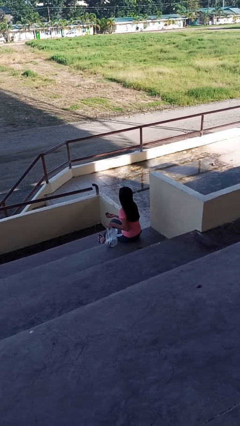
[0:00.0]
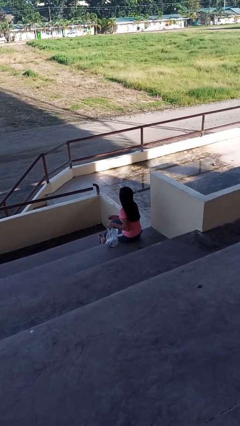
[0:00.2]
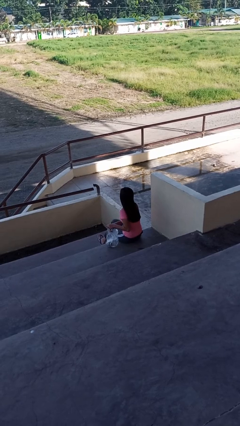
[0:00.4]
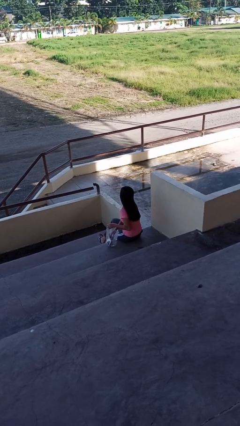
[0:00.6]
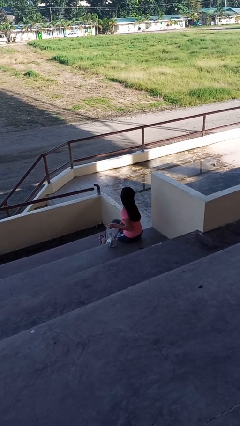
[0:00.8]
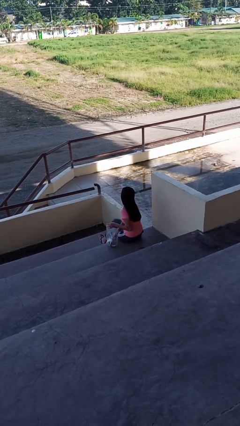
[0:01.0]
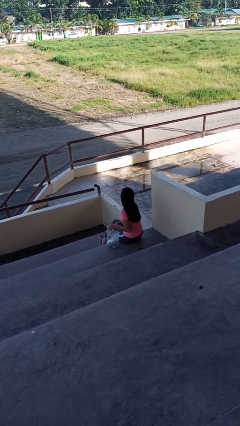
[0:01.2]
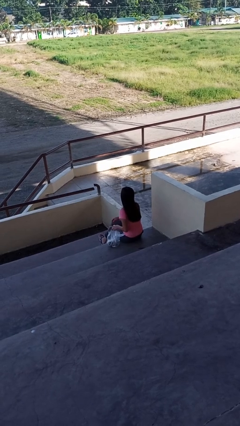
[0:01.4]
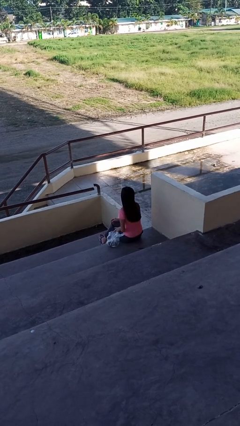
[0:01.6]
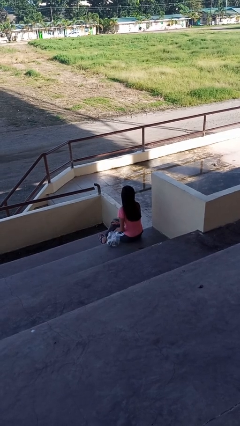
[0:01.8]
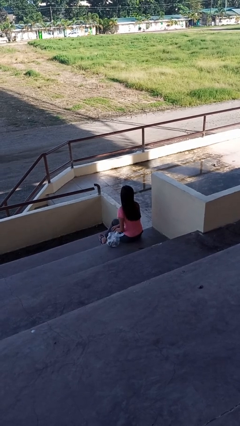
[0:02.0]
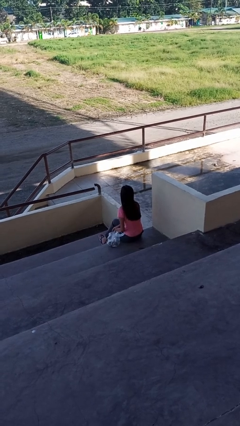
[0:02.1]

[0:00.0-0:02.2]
person puts object into bag

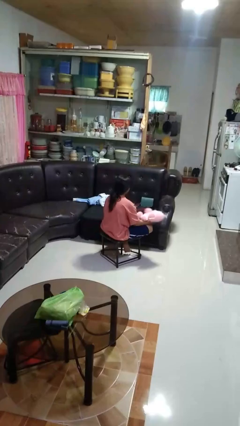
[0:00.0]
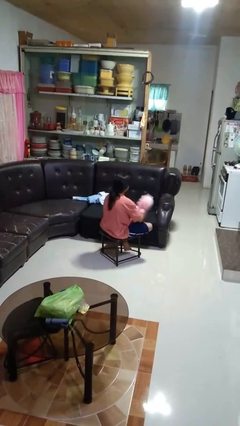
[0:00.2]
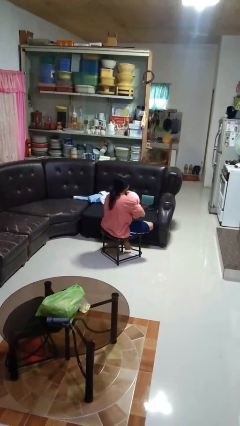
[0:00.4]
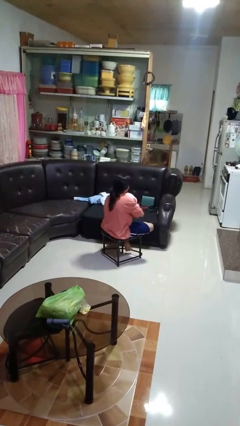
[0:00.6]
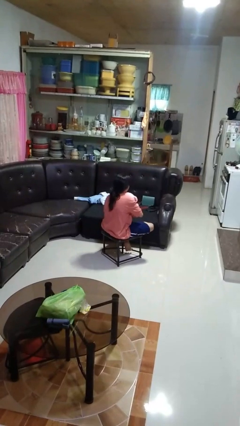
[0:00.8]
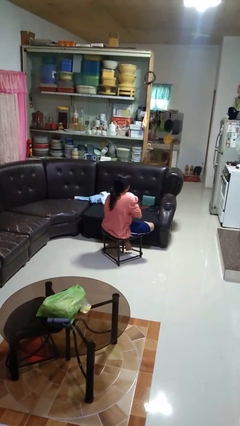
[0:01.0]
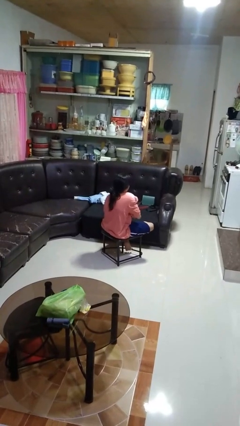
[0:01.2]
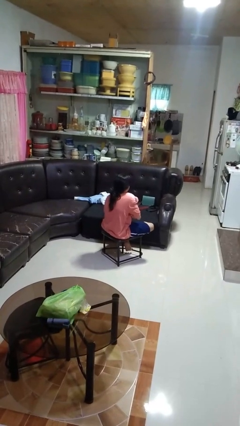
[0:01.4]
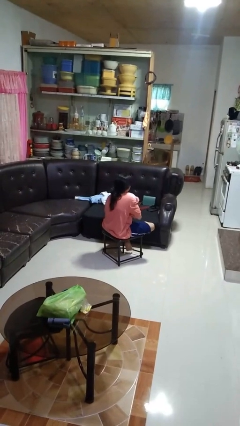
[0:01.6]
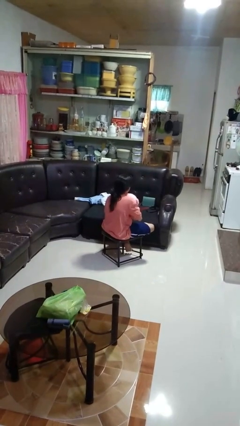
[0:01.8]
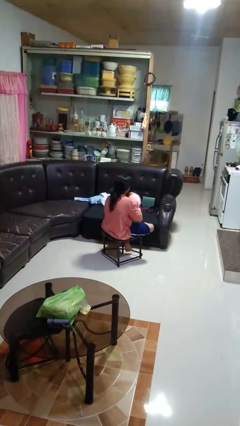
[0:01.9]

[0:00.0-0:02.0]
person hugs stuffed animal

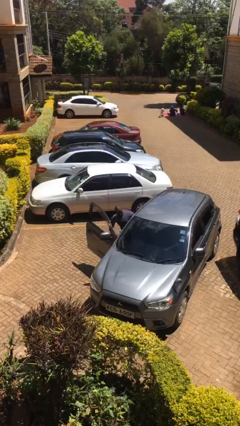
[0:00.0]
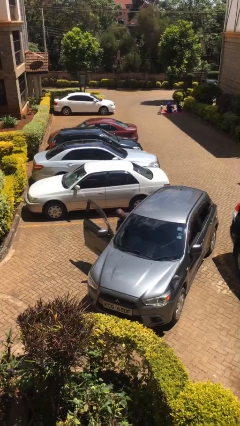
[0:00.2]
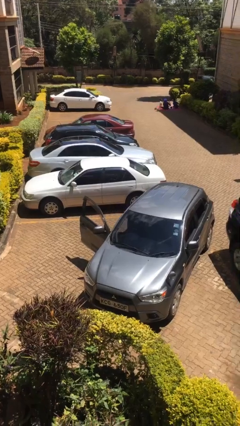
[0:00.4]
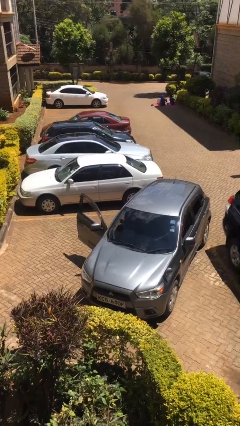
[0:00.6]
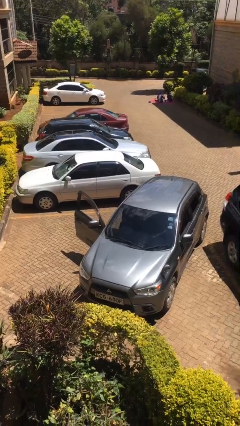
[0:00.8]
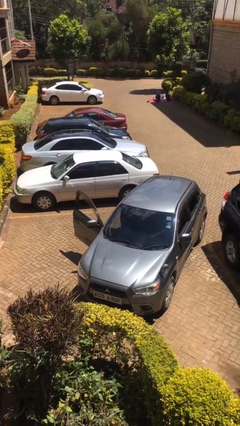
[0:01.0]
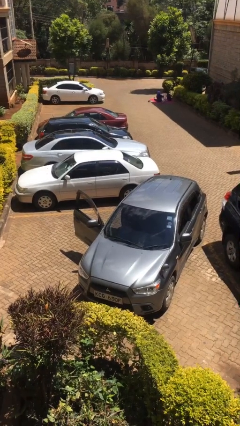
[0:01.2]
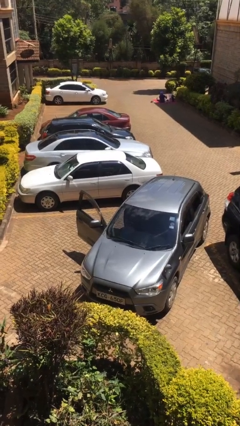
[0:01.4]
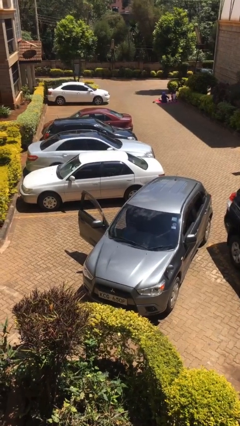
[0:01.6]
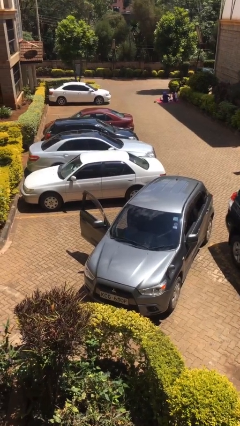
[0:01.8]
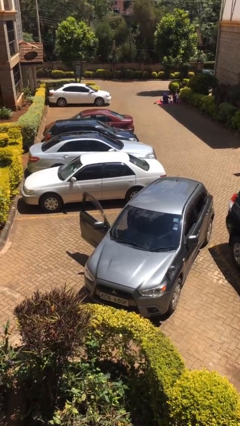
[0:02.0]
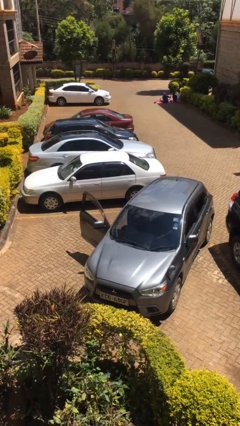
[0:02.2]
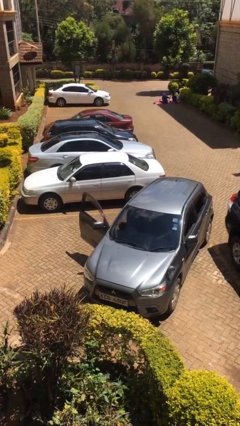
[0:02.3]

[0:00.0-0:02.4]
person enters car

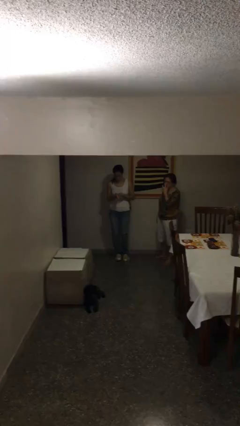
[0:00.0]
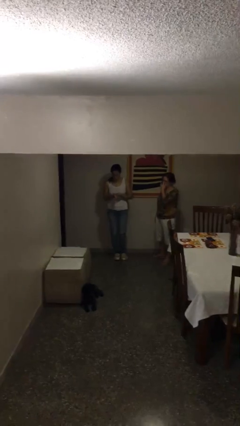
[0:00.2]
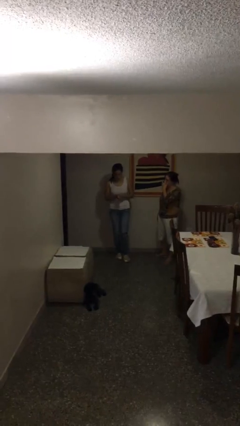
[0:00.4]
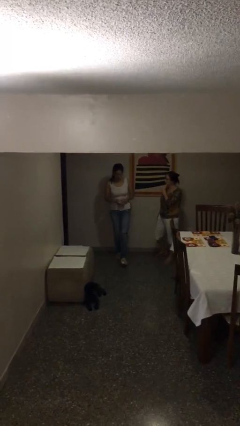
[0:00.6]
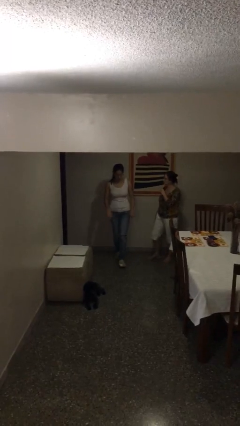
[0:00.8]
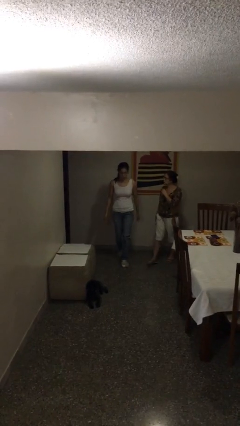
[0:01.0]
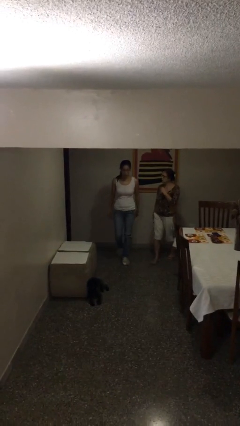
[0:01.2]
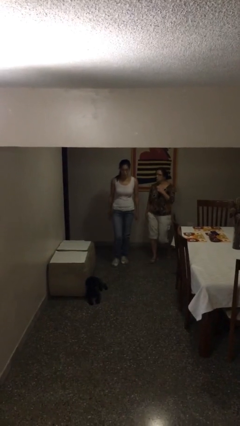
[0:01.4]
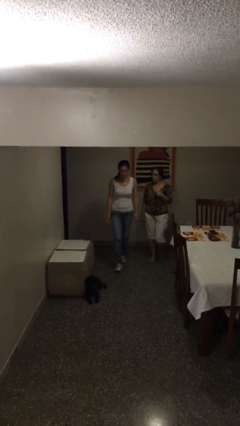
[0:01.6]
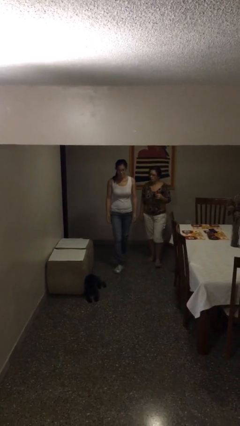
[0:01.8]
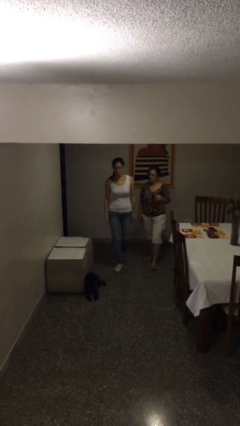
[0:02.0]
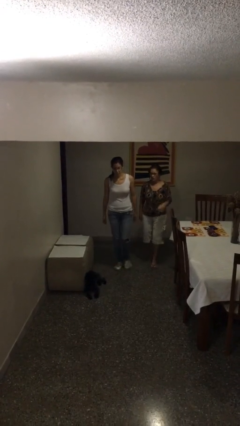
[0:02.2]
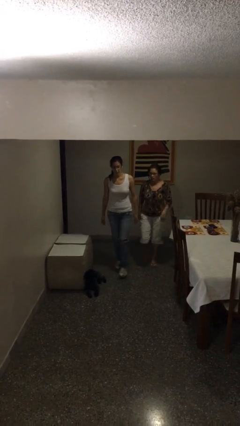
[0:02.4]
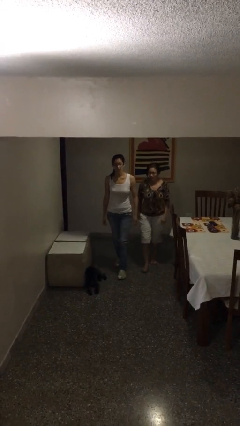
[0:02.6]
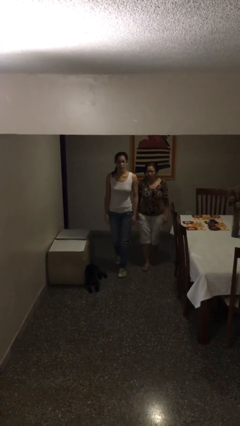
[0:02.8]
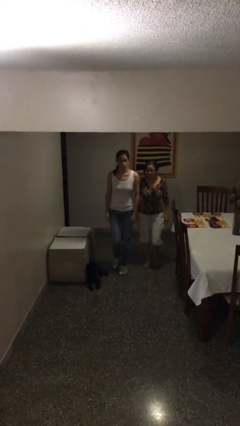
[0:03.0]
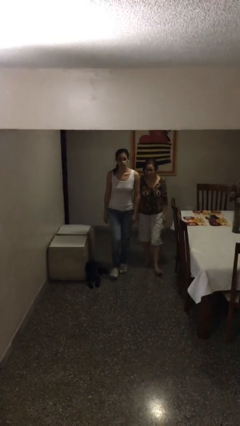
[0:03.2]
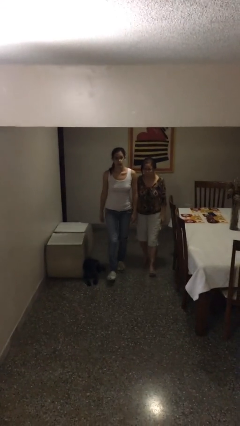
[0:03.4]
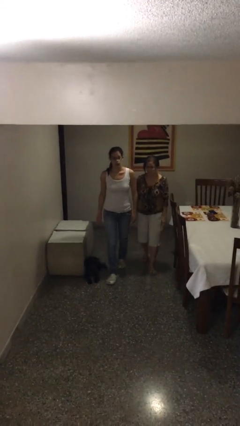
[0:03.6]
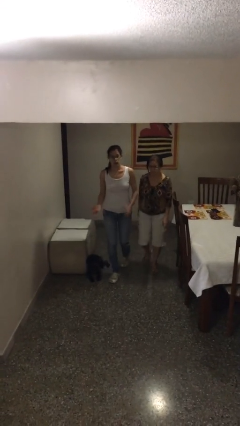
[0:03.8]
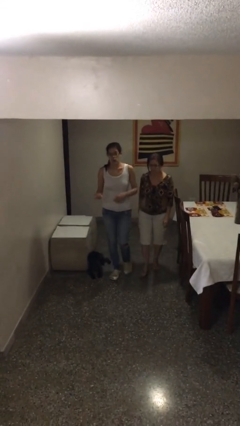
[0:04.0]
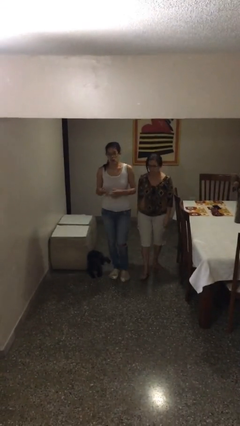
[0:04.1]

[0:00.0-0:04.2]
person talks to person

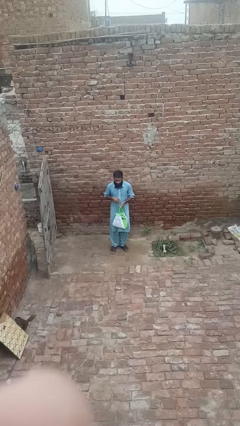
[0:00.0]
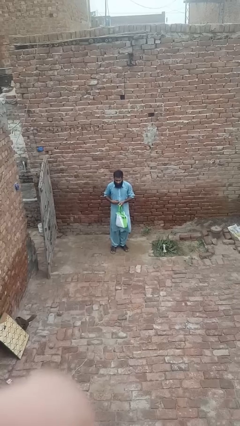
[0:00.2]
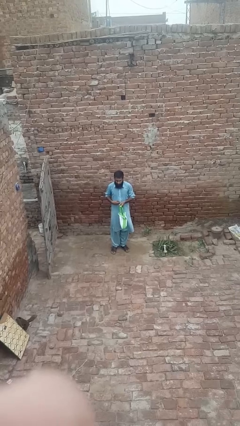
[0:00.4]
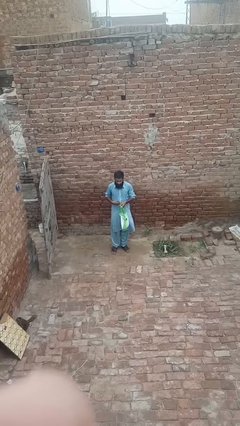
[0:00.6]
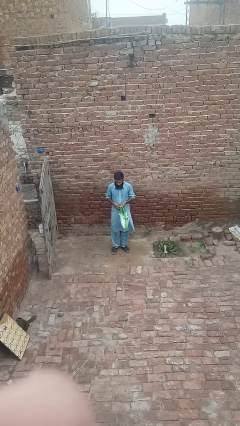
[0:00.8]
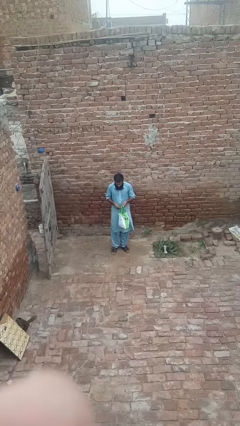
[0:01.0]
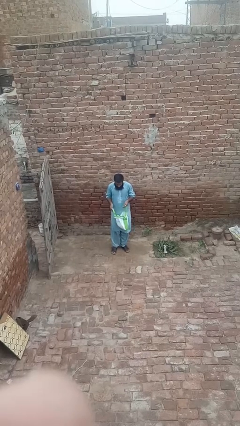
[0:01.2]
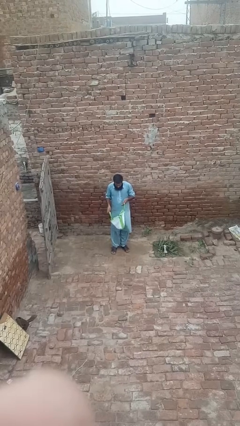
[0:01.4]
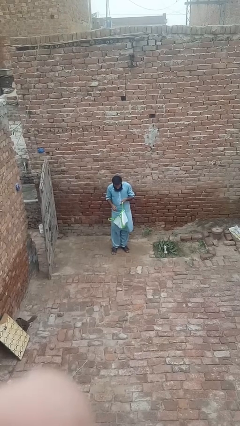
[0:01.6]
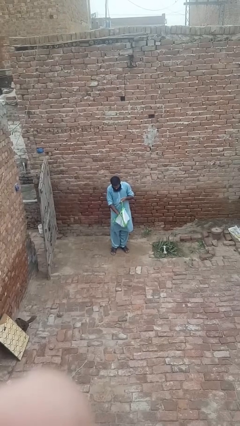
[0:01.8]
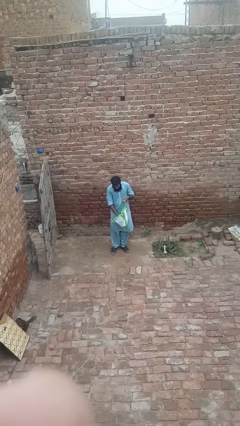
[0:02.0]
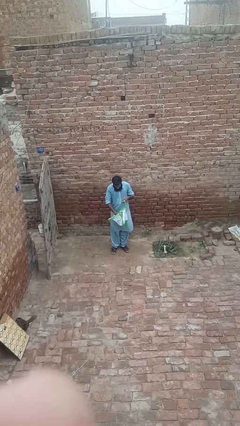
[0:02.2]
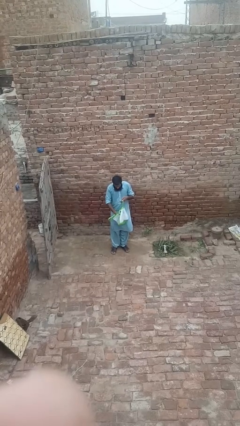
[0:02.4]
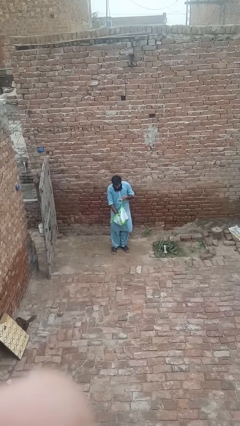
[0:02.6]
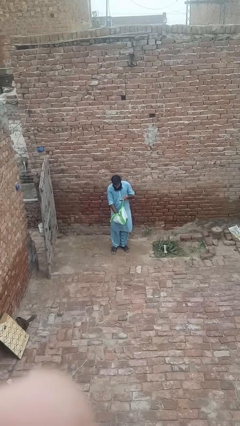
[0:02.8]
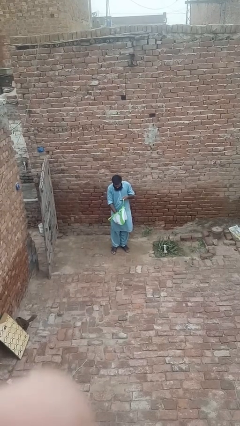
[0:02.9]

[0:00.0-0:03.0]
person searches in bag

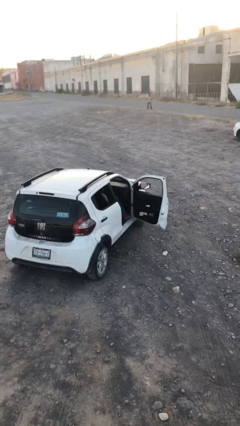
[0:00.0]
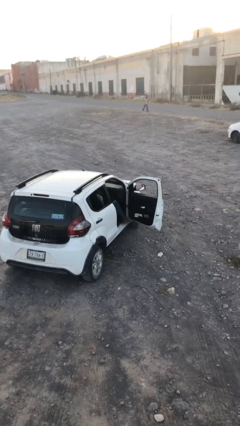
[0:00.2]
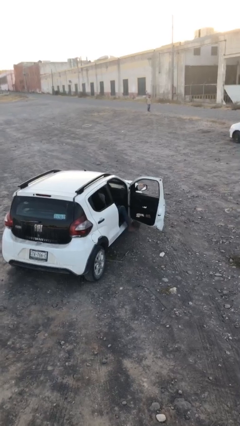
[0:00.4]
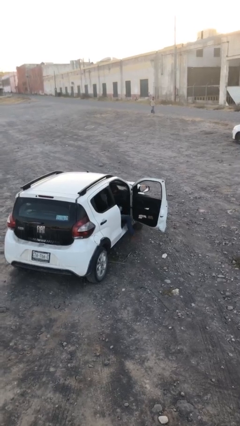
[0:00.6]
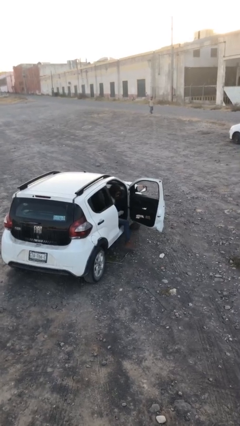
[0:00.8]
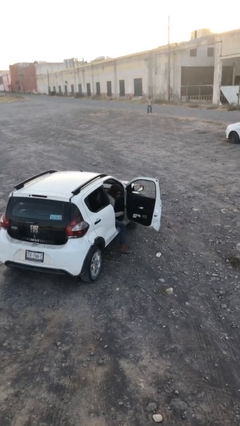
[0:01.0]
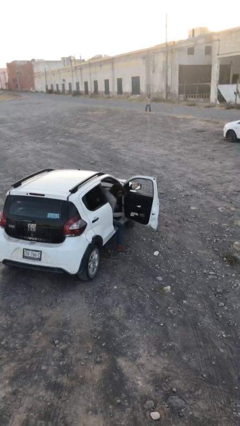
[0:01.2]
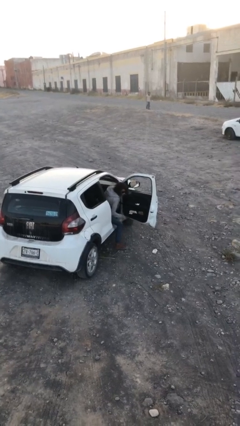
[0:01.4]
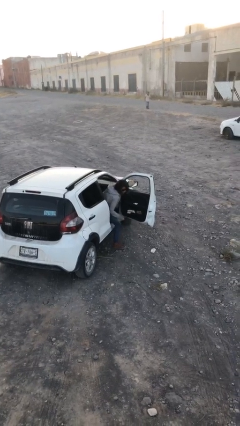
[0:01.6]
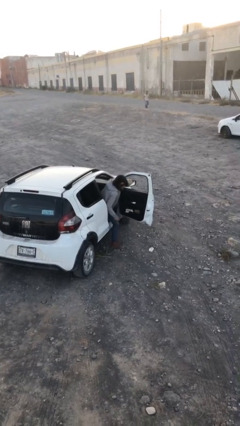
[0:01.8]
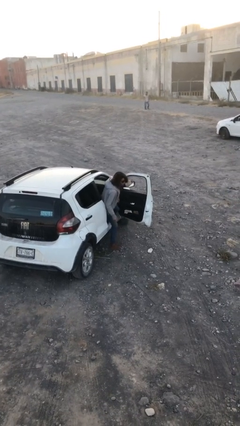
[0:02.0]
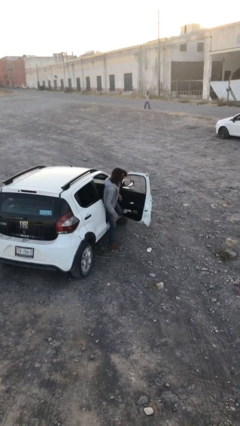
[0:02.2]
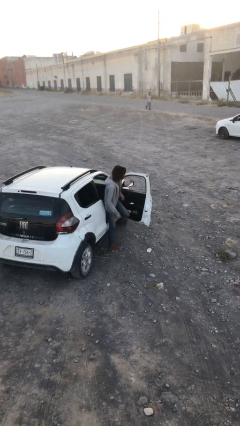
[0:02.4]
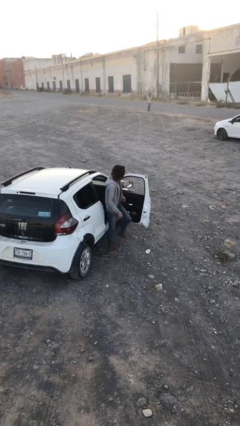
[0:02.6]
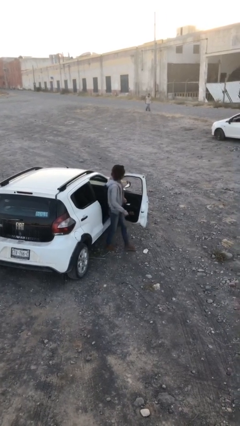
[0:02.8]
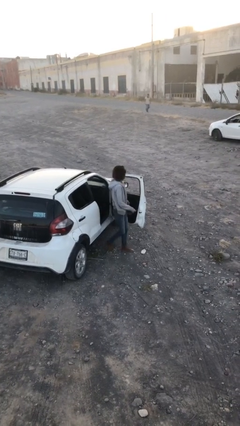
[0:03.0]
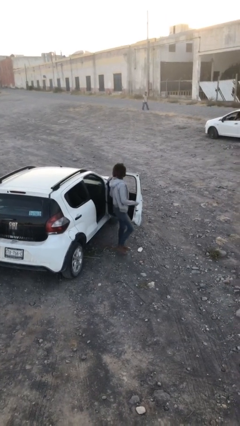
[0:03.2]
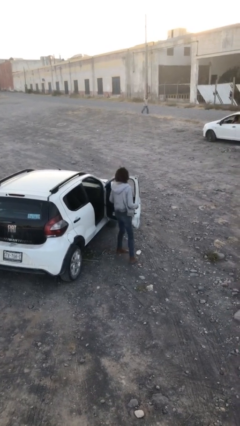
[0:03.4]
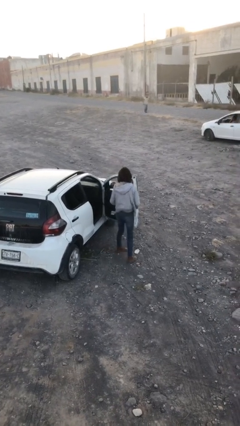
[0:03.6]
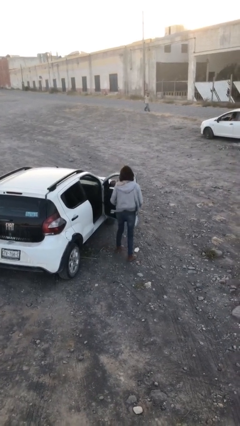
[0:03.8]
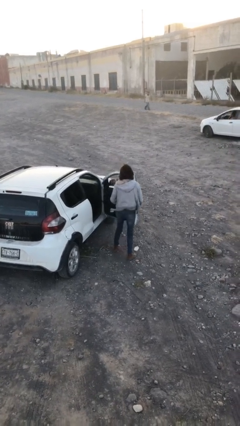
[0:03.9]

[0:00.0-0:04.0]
person exits car
